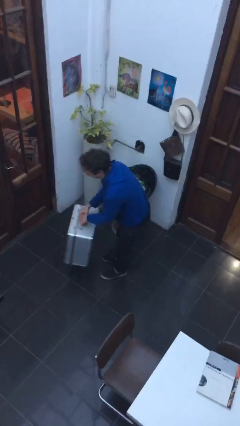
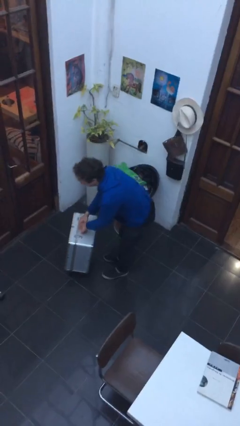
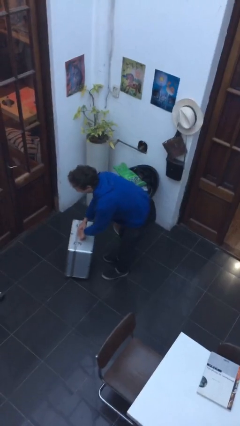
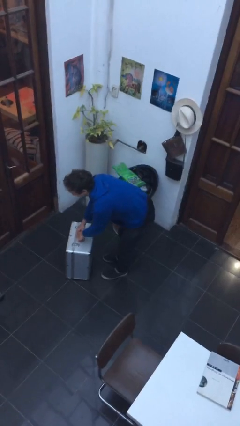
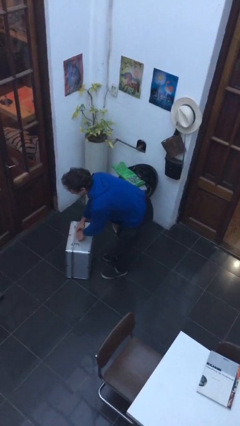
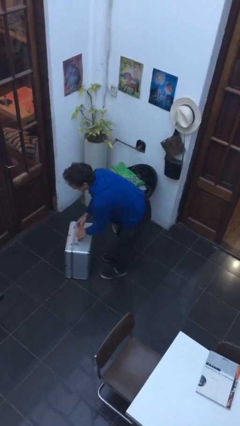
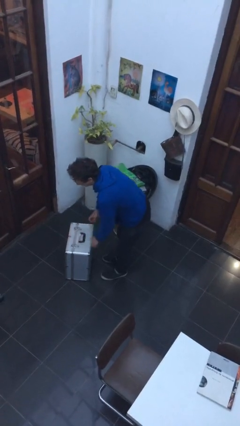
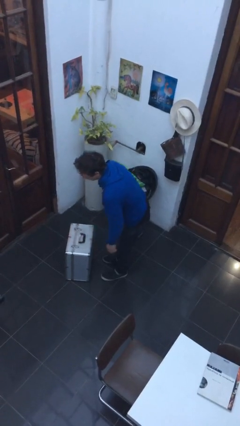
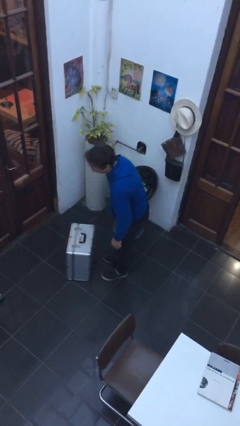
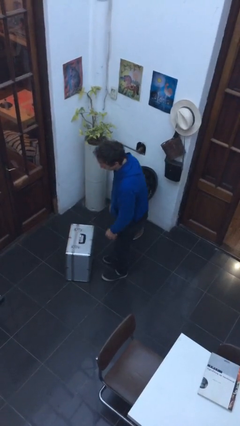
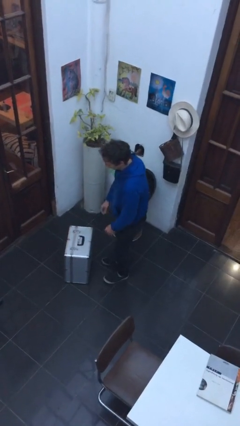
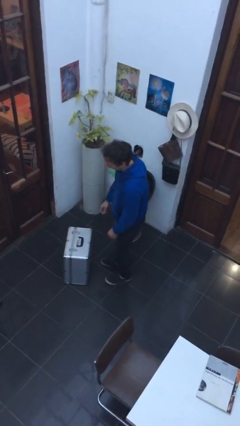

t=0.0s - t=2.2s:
person puts down object on floor

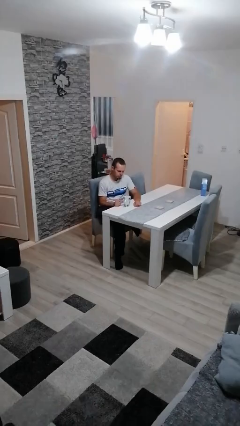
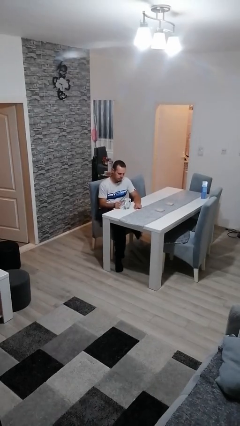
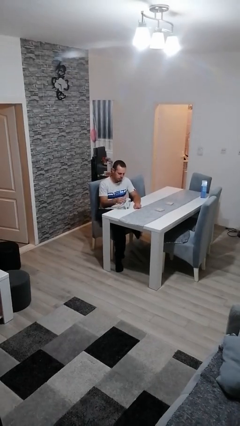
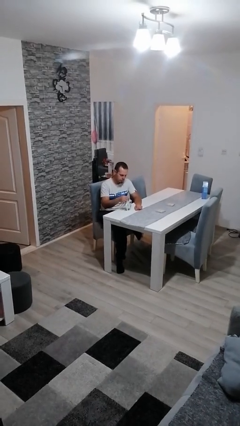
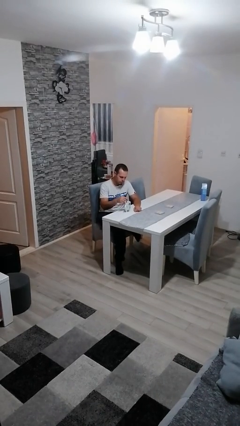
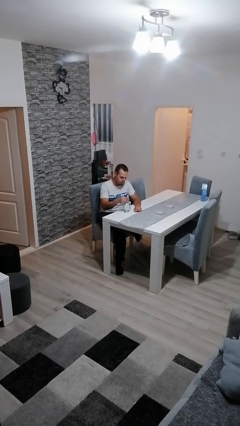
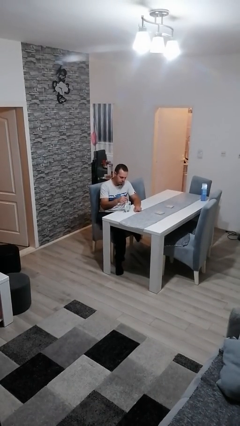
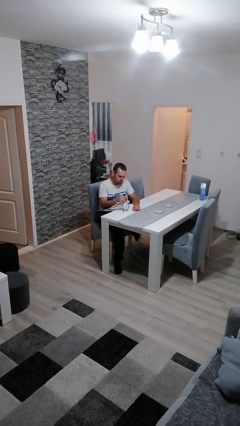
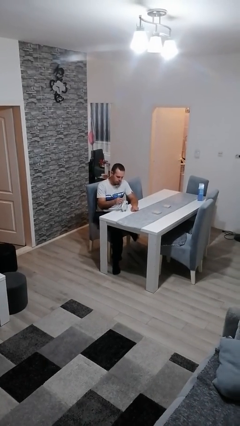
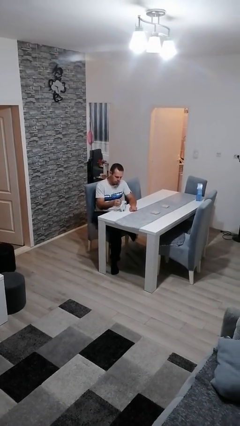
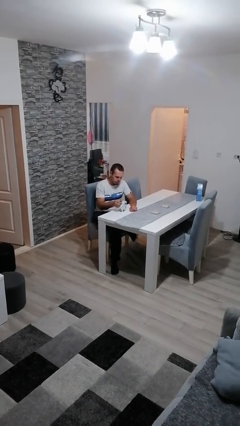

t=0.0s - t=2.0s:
person stirs mug

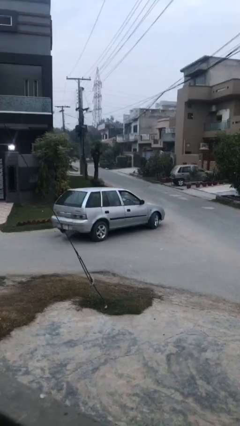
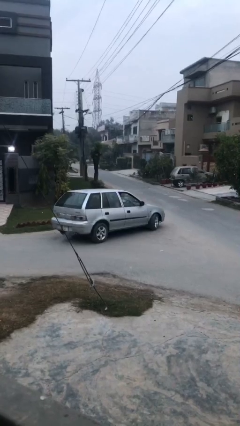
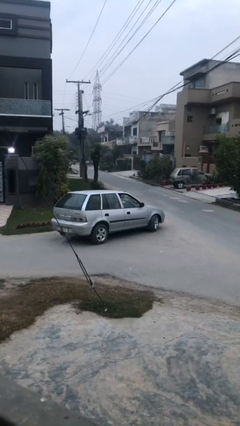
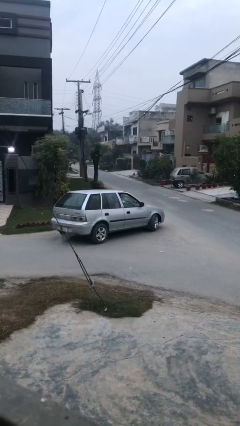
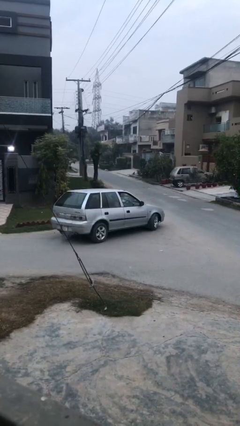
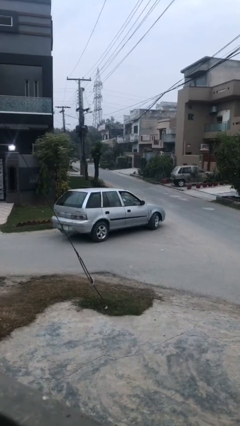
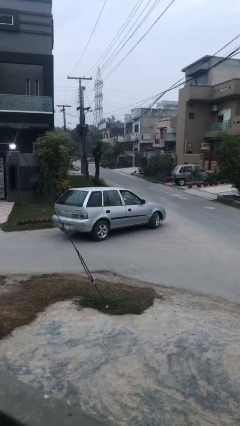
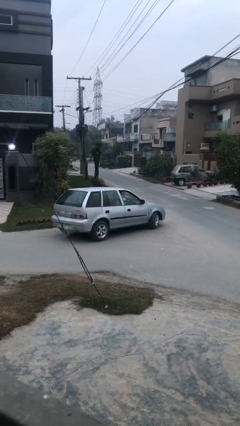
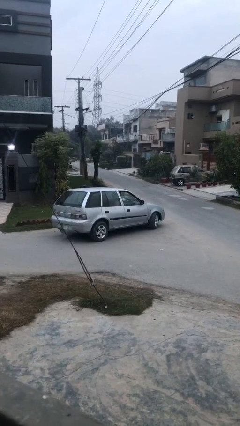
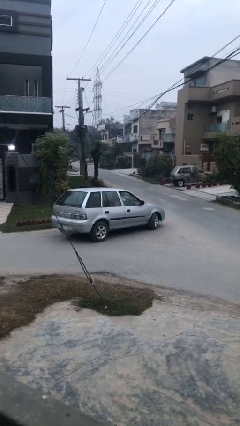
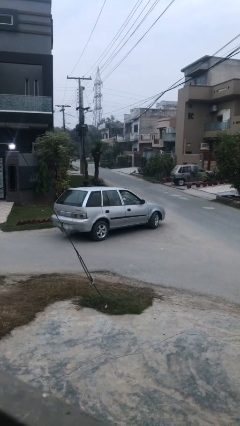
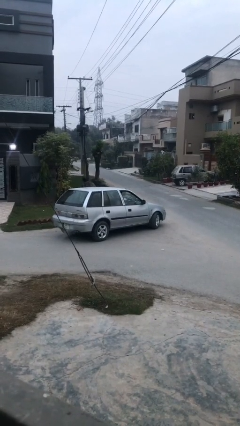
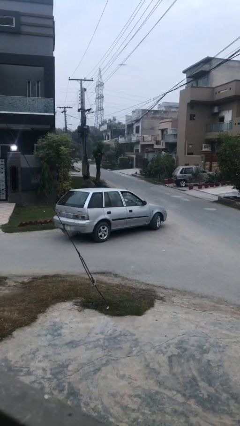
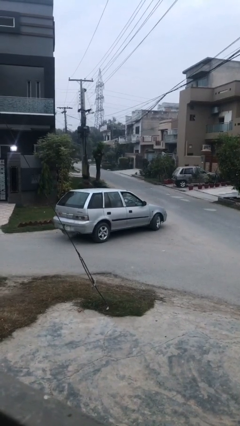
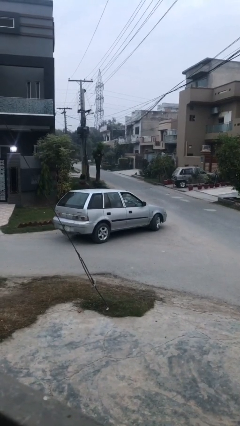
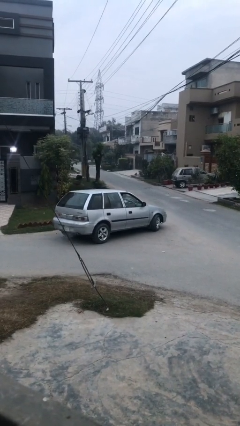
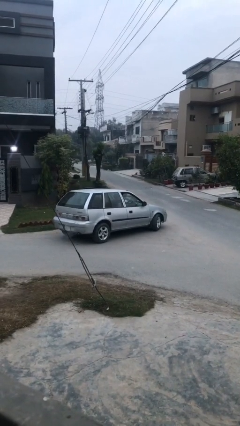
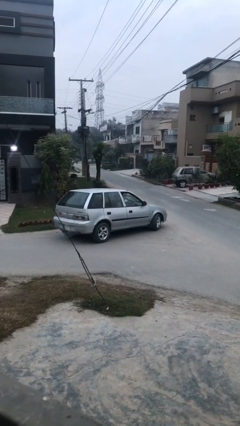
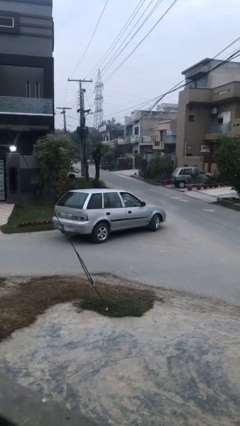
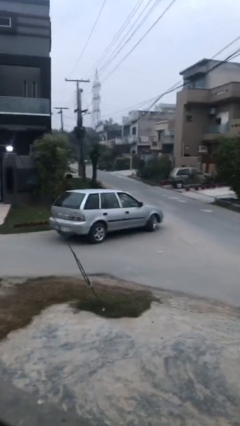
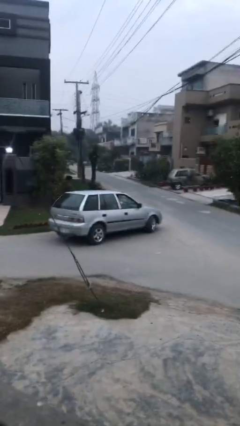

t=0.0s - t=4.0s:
car drops off person

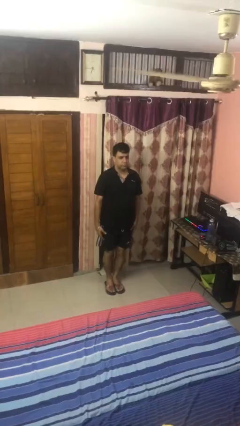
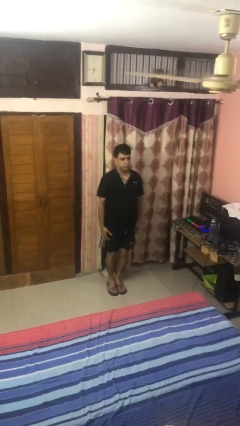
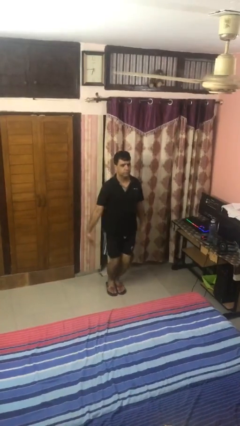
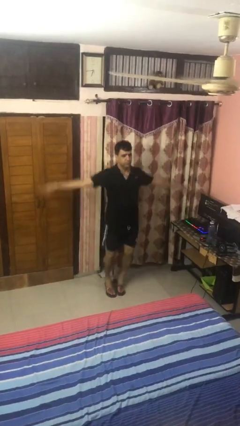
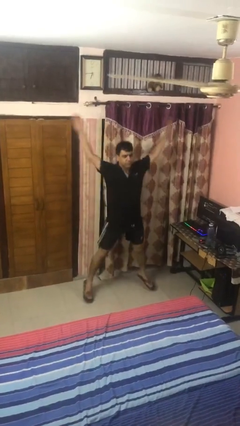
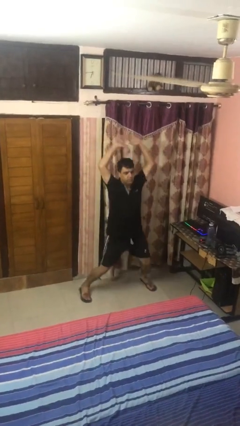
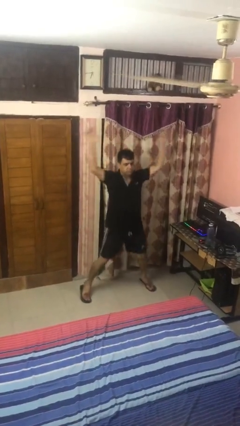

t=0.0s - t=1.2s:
person exercises with jumping jacks

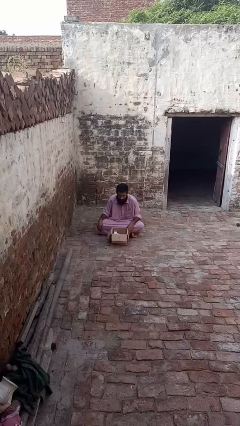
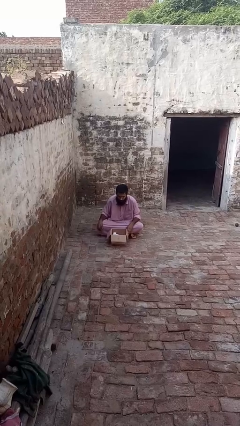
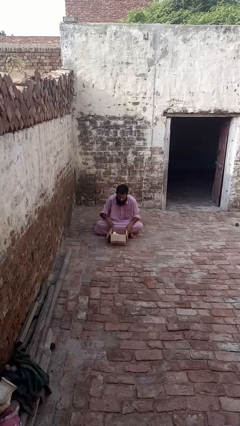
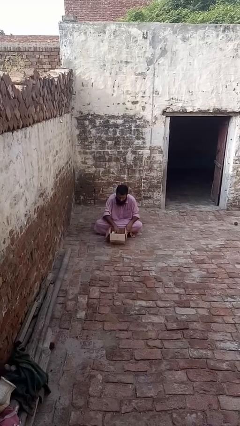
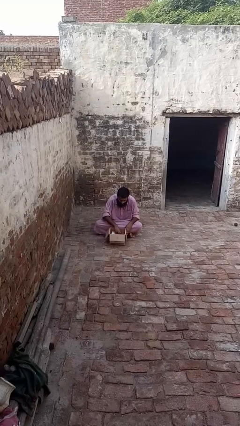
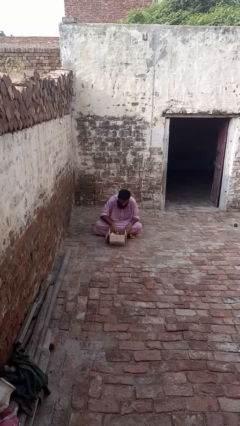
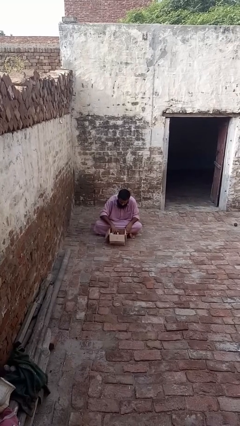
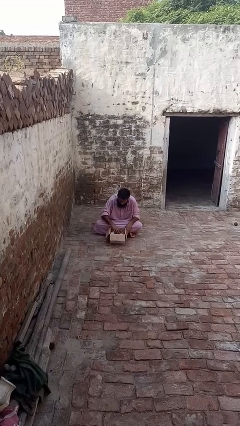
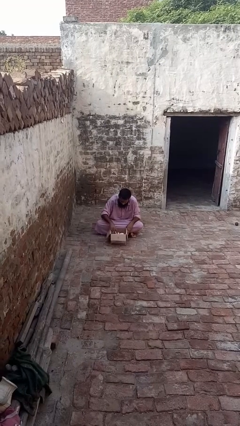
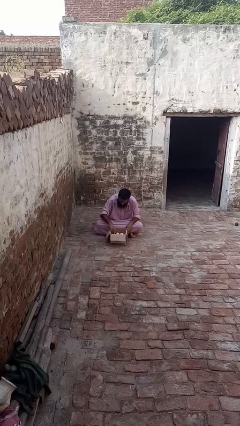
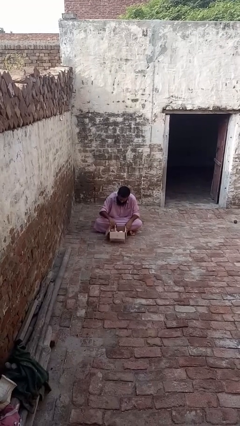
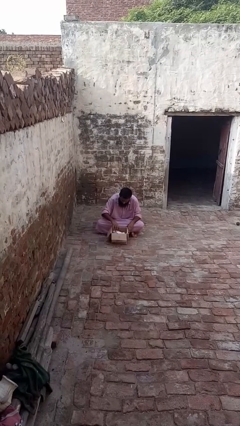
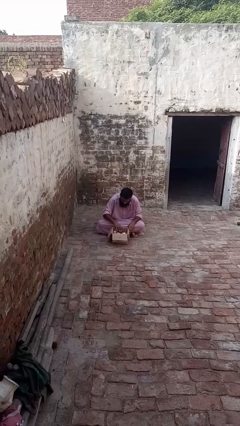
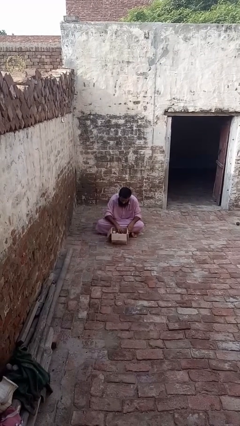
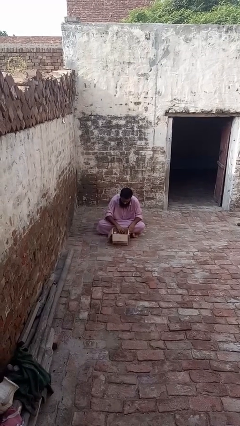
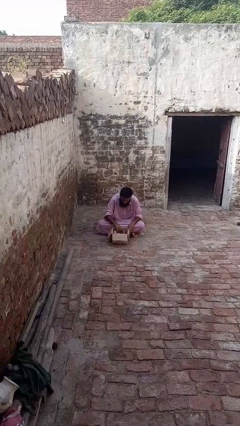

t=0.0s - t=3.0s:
person searches in box

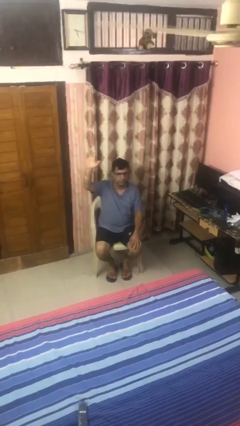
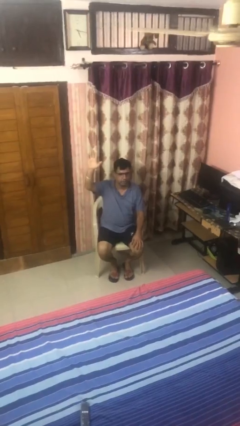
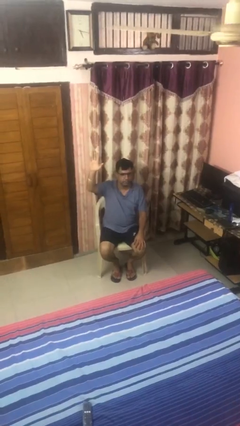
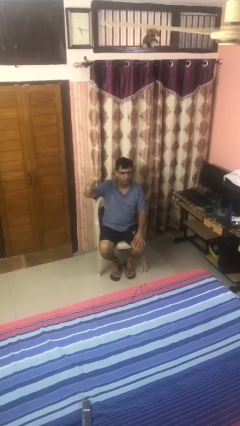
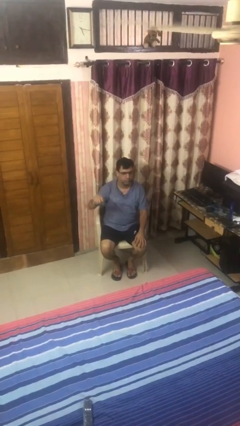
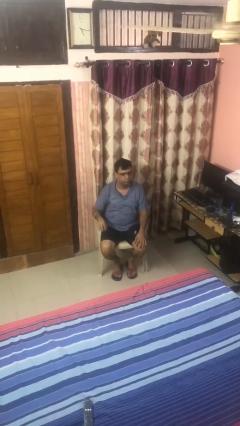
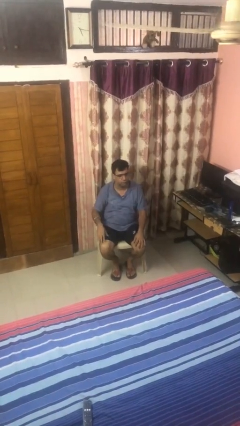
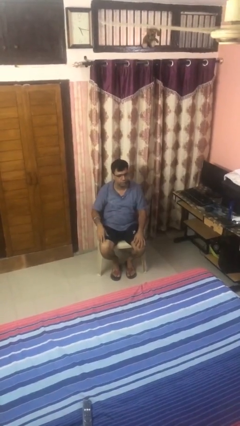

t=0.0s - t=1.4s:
person gestures lower hand

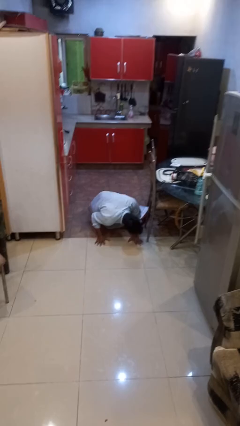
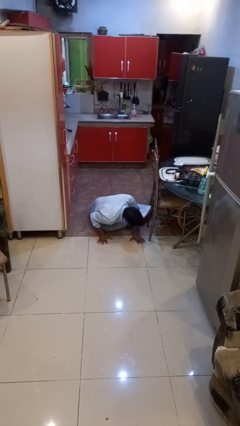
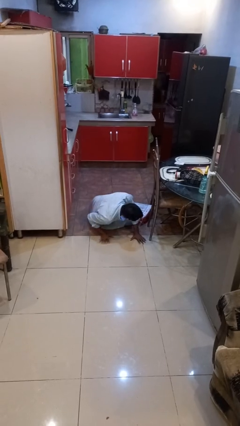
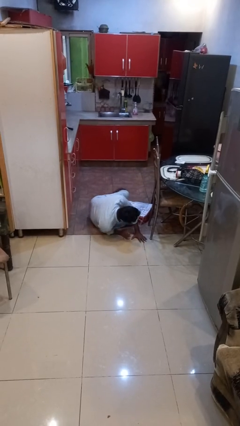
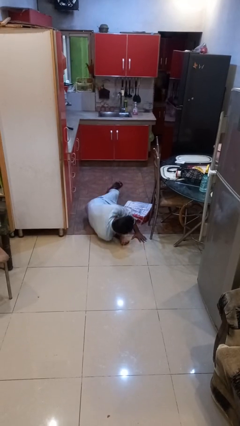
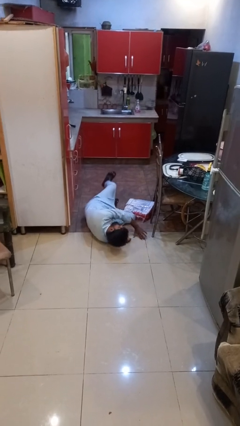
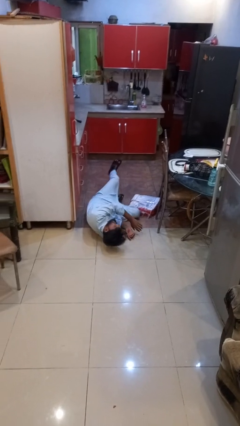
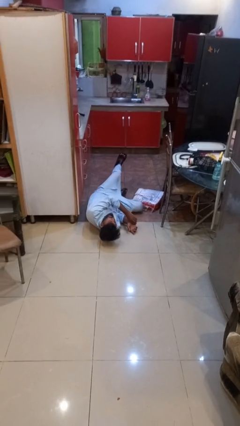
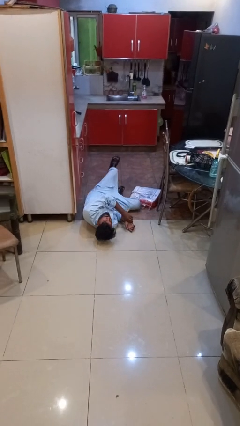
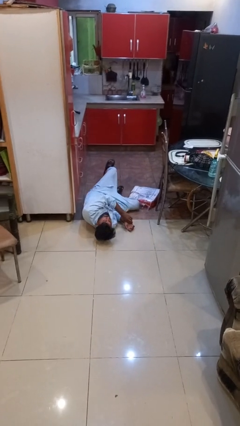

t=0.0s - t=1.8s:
person lies down on floor

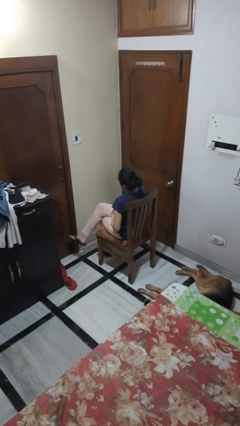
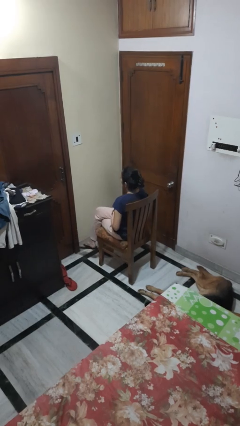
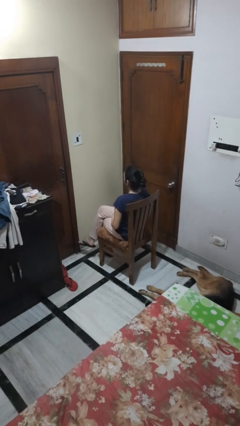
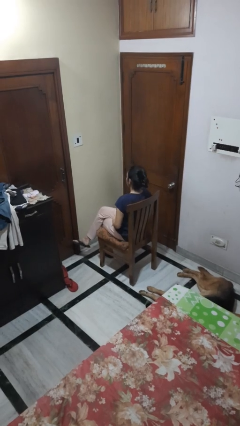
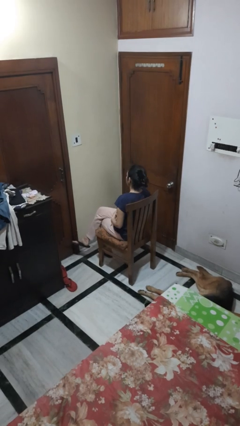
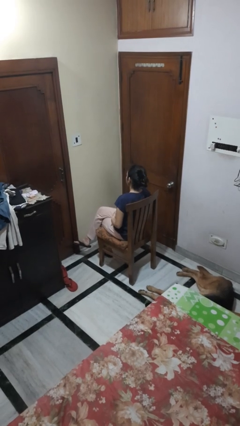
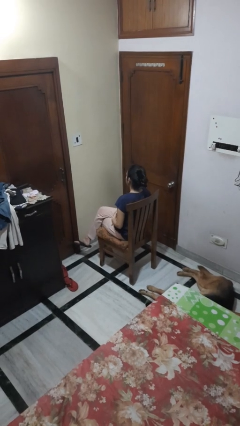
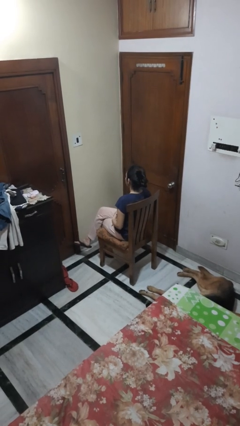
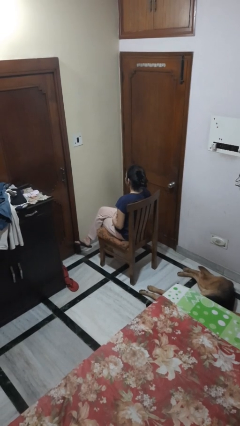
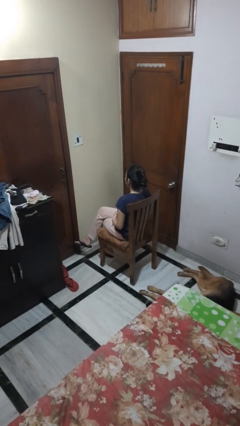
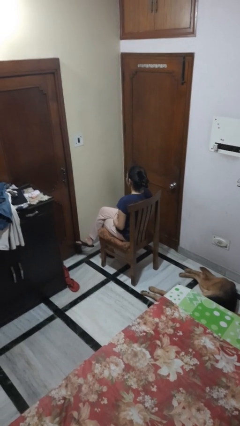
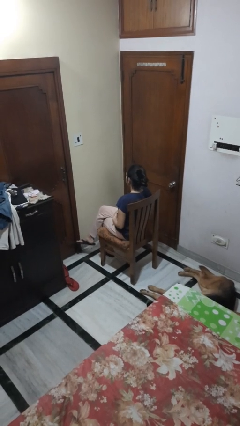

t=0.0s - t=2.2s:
person crosses legs
